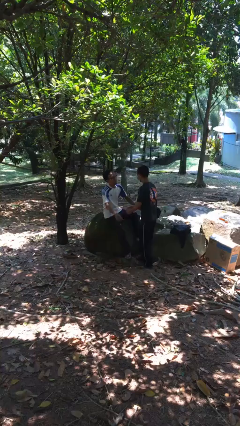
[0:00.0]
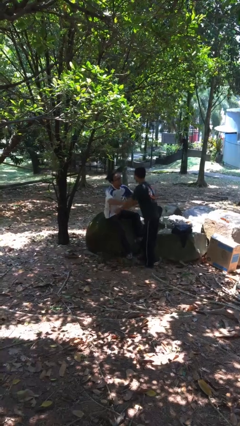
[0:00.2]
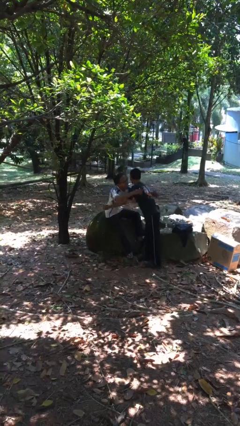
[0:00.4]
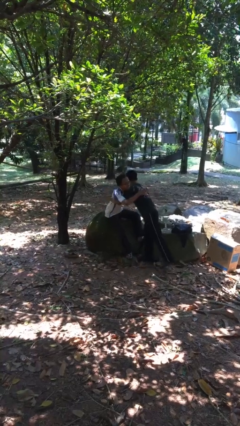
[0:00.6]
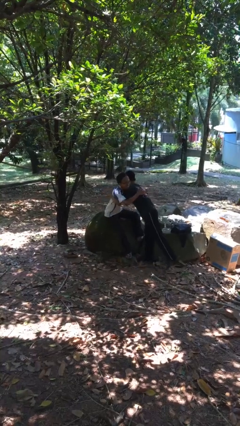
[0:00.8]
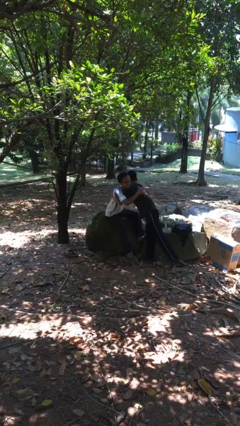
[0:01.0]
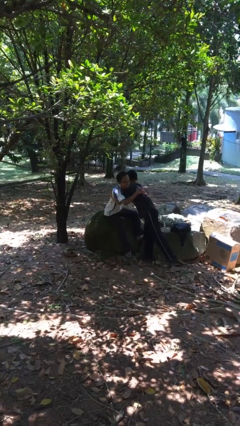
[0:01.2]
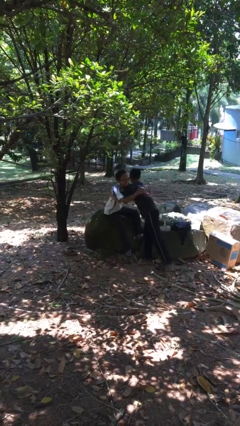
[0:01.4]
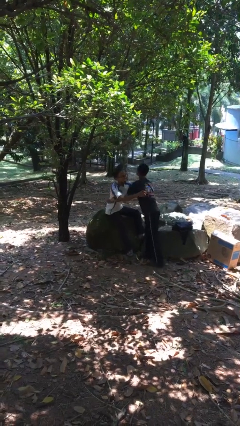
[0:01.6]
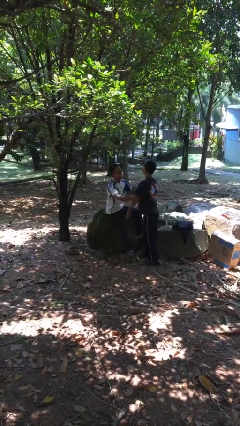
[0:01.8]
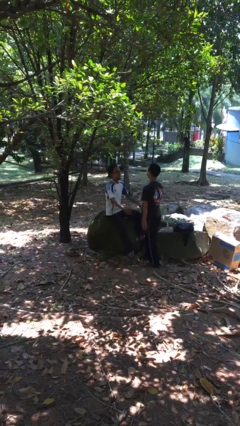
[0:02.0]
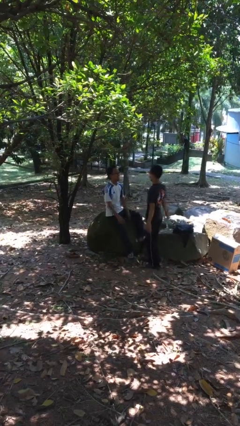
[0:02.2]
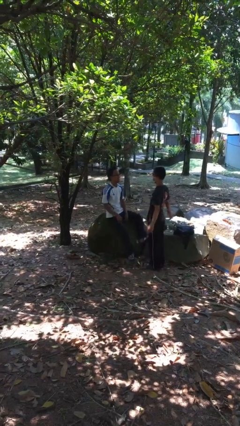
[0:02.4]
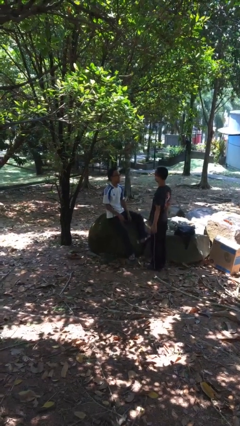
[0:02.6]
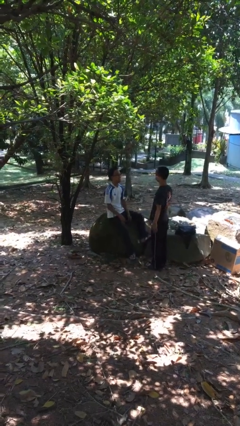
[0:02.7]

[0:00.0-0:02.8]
person embraces person

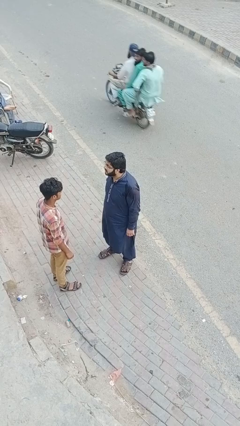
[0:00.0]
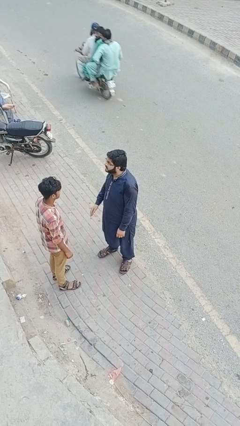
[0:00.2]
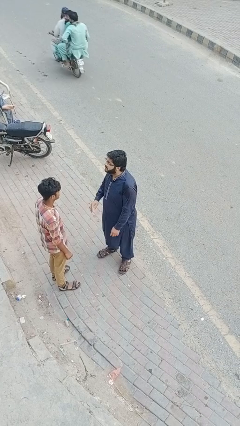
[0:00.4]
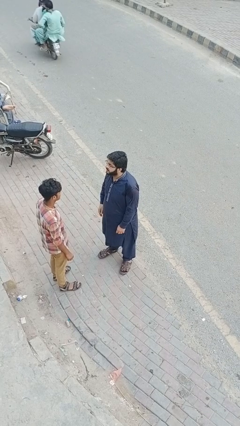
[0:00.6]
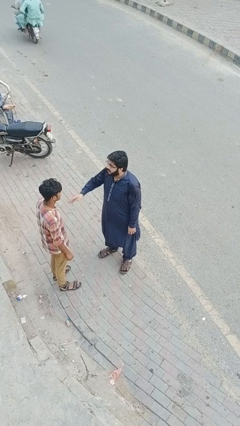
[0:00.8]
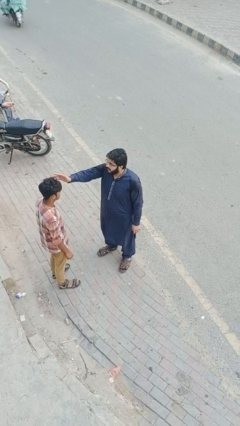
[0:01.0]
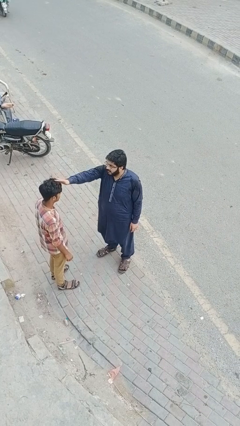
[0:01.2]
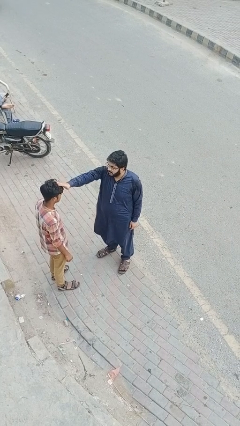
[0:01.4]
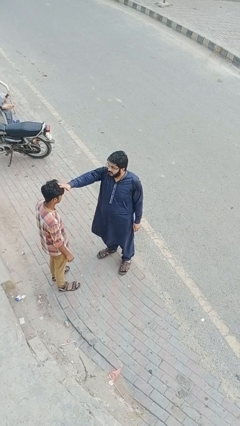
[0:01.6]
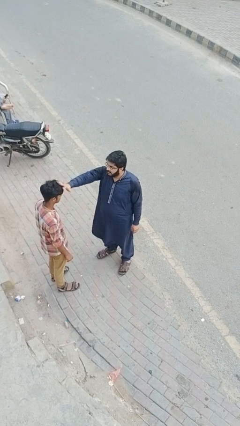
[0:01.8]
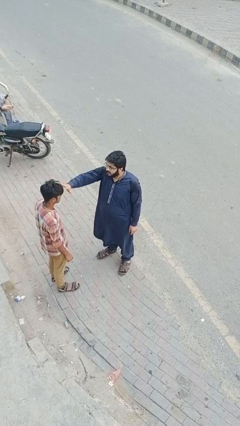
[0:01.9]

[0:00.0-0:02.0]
person grabs person by hair

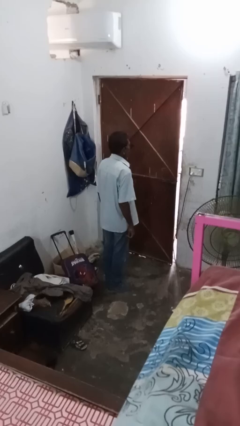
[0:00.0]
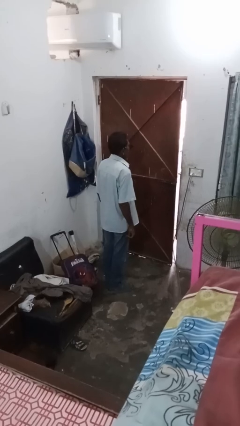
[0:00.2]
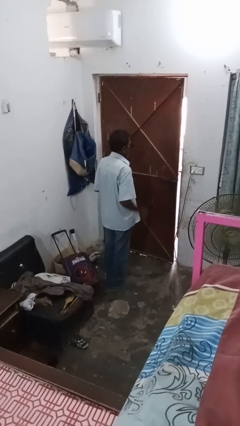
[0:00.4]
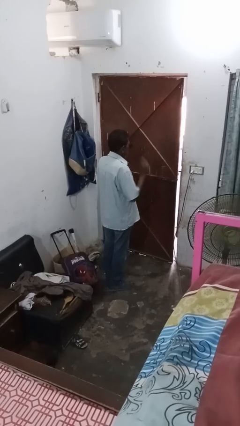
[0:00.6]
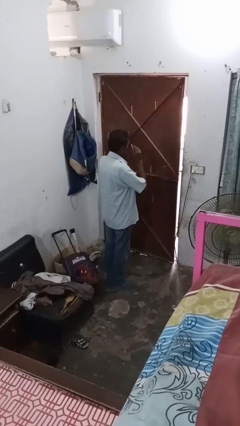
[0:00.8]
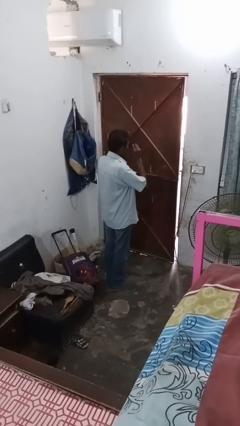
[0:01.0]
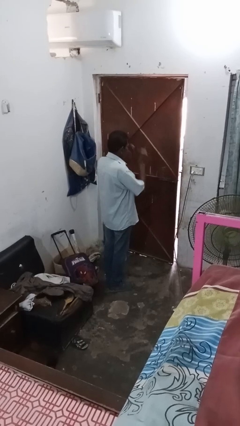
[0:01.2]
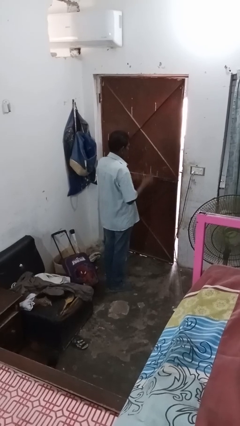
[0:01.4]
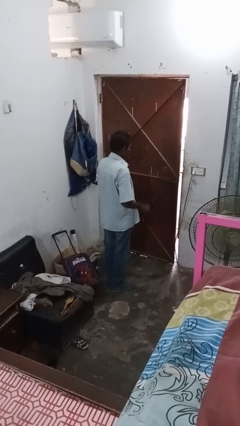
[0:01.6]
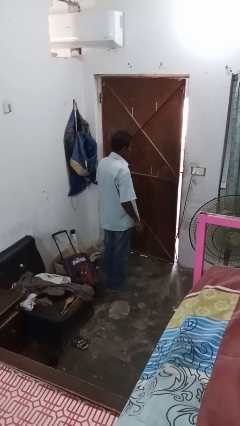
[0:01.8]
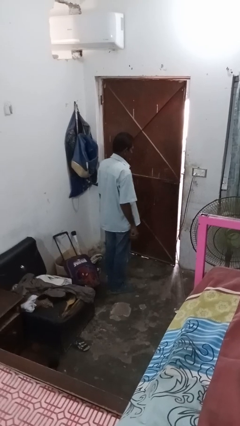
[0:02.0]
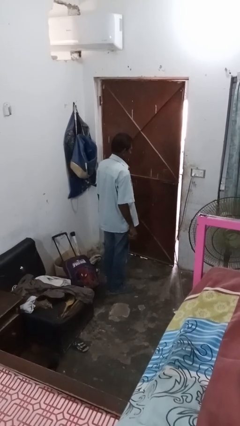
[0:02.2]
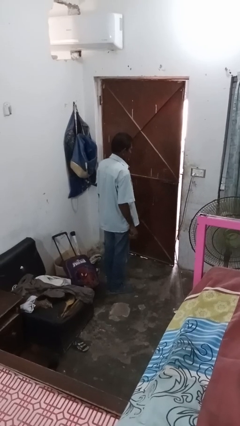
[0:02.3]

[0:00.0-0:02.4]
person takes off sunglasses

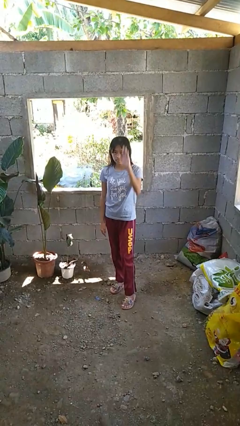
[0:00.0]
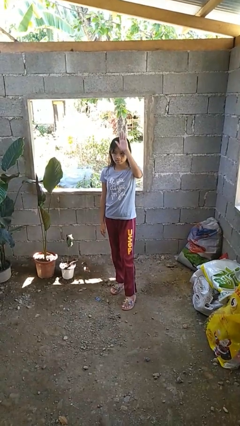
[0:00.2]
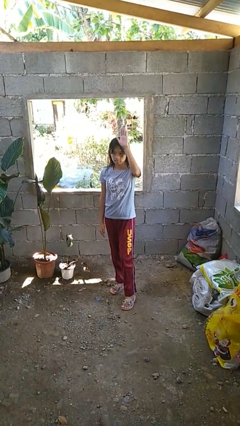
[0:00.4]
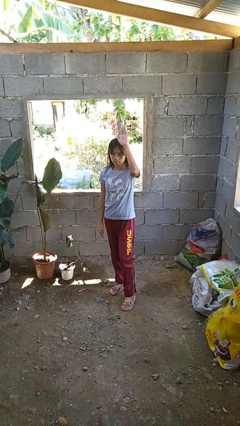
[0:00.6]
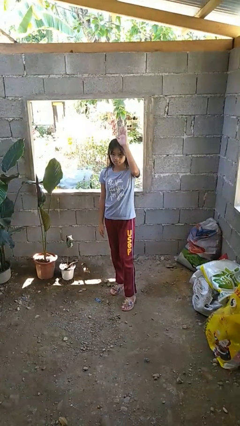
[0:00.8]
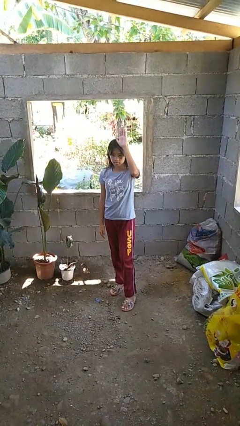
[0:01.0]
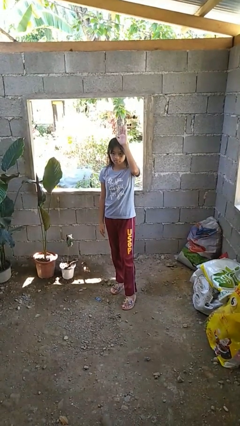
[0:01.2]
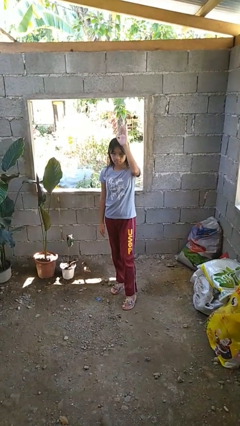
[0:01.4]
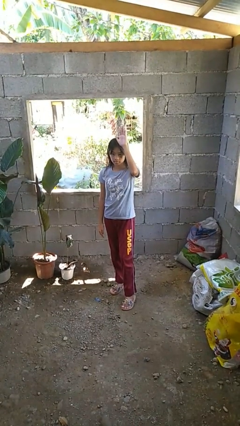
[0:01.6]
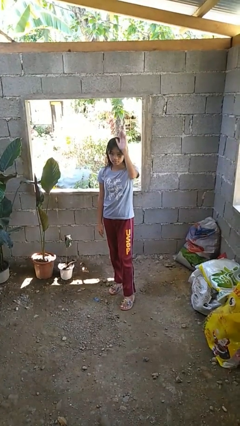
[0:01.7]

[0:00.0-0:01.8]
person gestures raise hand

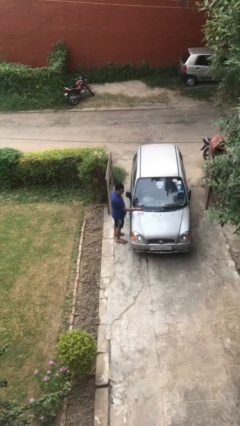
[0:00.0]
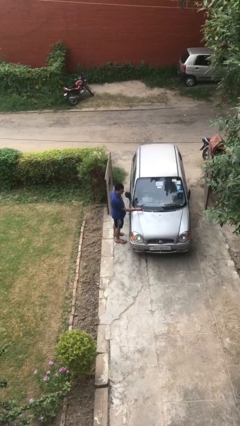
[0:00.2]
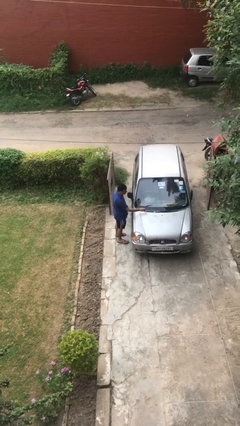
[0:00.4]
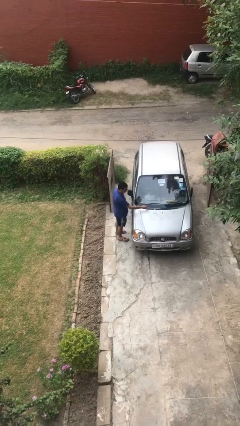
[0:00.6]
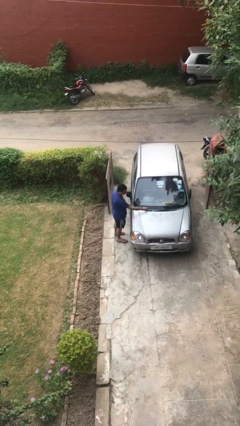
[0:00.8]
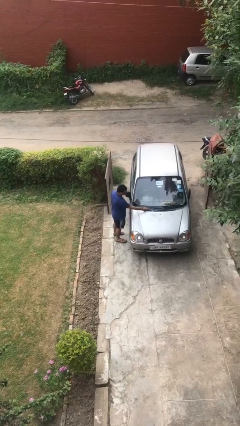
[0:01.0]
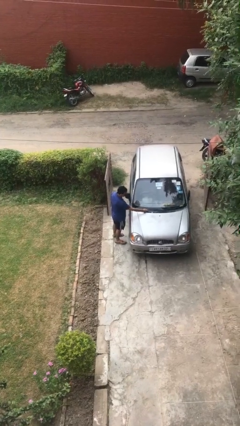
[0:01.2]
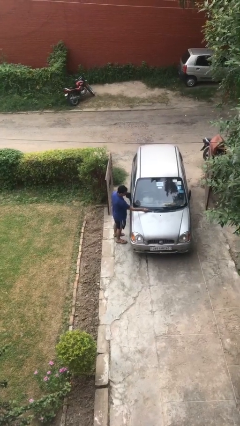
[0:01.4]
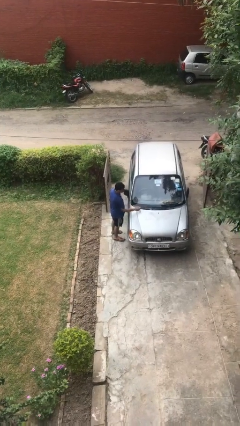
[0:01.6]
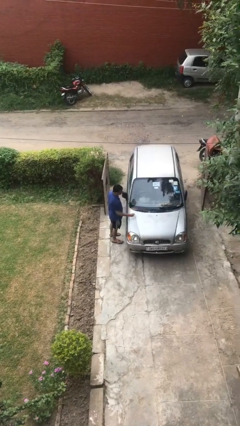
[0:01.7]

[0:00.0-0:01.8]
person flips down car wipers

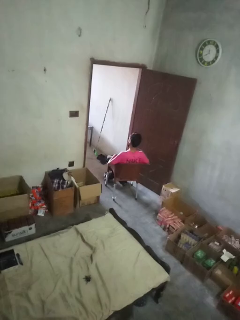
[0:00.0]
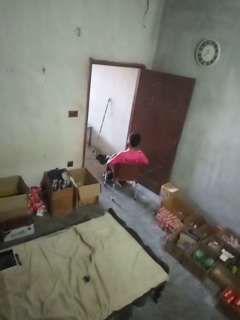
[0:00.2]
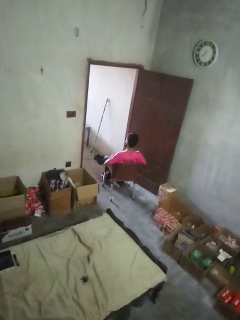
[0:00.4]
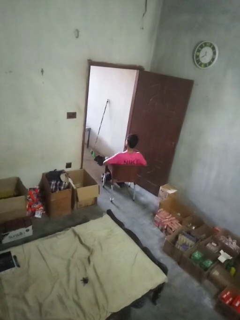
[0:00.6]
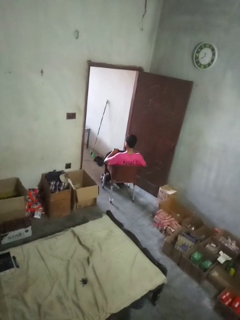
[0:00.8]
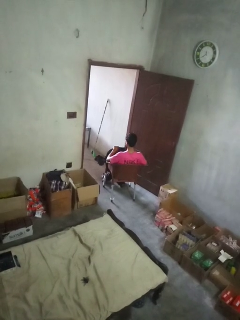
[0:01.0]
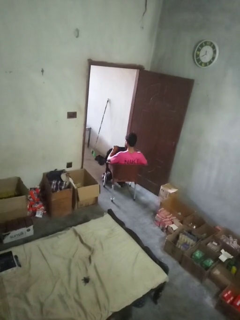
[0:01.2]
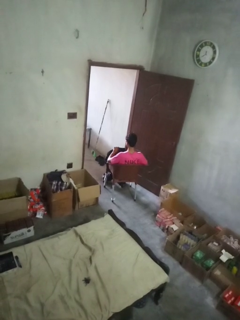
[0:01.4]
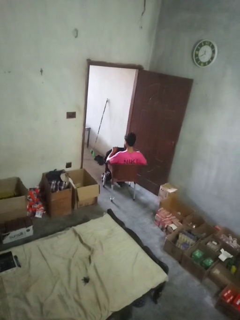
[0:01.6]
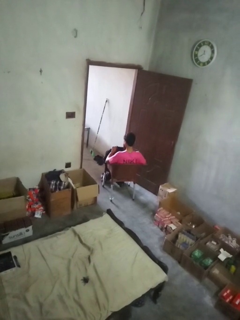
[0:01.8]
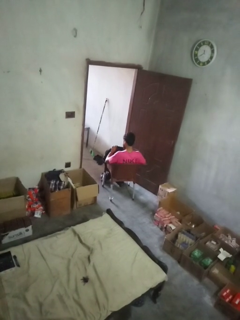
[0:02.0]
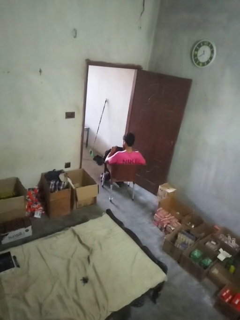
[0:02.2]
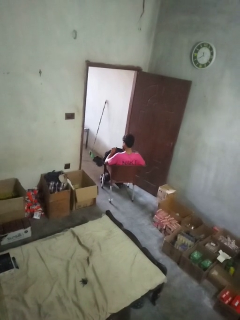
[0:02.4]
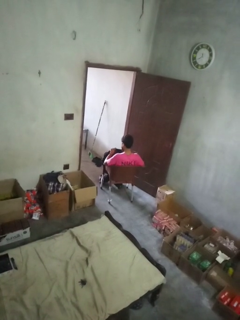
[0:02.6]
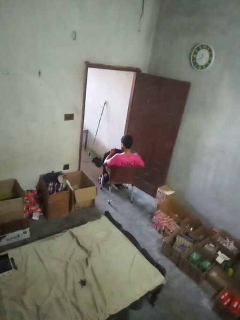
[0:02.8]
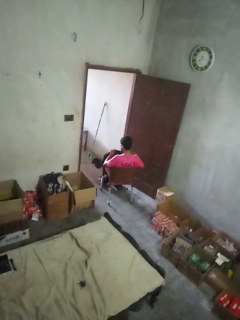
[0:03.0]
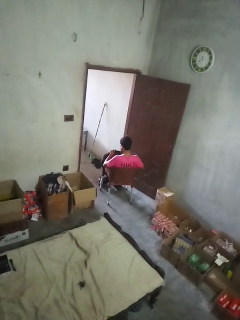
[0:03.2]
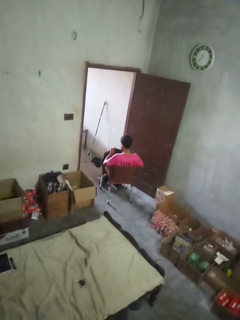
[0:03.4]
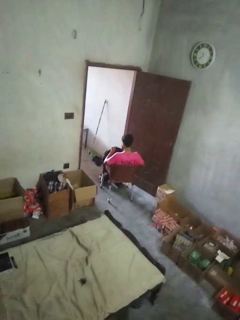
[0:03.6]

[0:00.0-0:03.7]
person searches in backpack

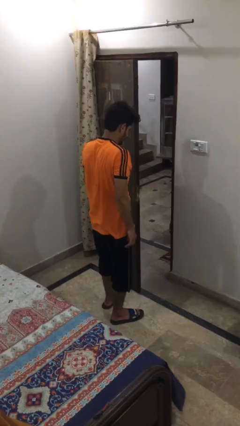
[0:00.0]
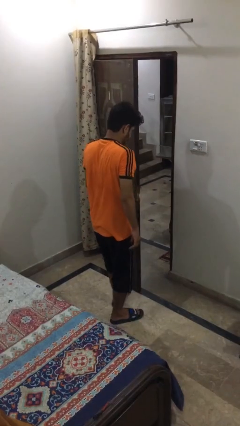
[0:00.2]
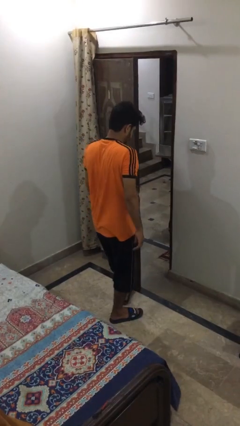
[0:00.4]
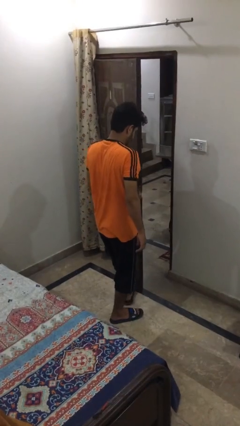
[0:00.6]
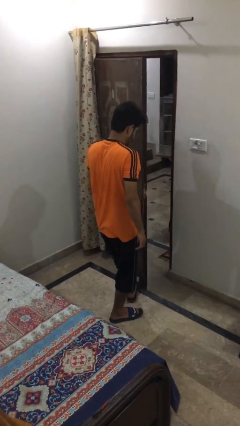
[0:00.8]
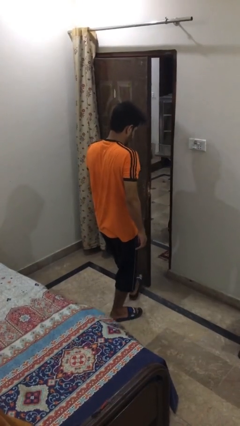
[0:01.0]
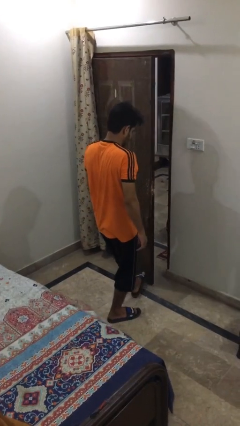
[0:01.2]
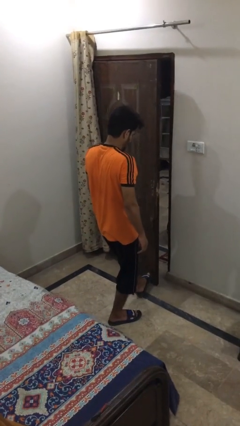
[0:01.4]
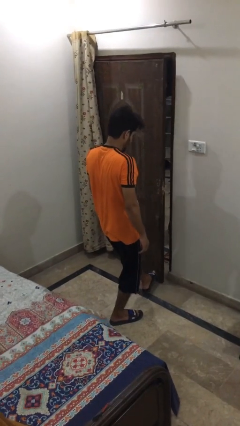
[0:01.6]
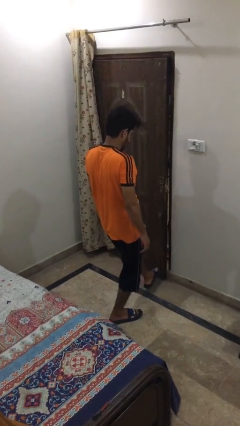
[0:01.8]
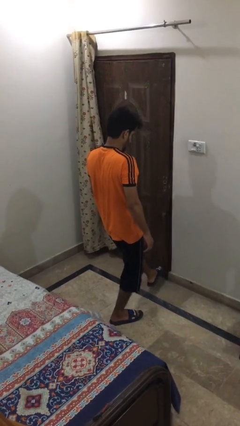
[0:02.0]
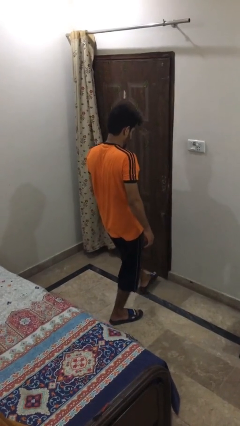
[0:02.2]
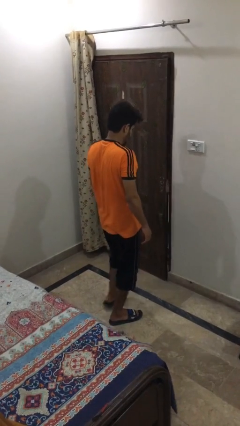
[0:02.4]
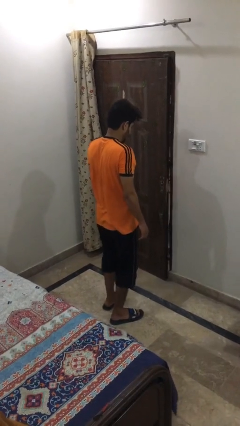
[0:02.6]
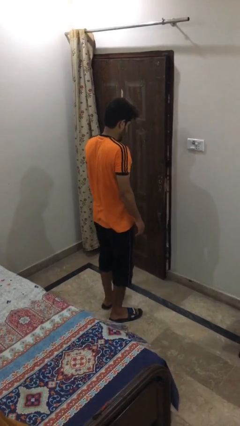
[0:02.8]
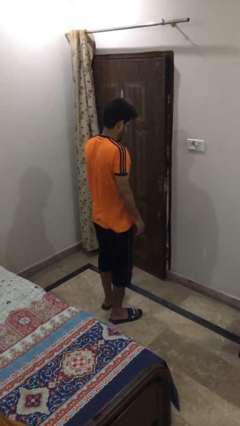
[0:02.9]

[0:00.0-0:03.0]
person closes door with foot

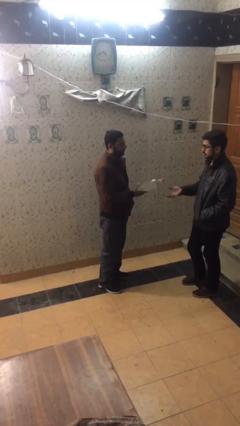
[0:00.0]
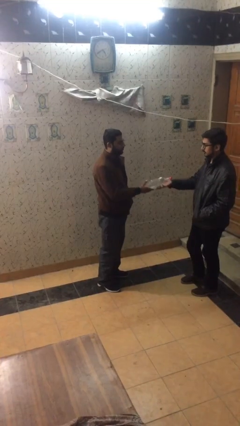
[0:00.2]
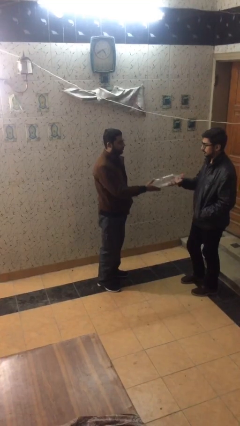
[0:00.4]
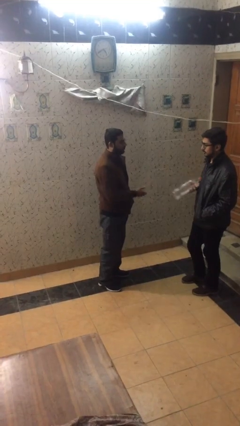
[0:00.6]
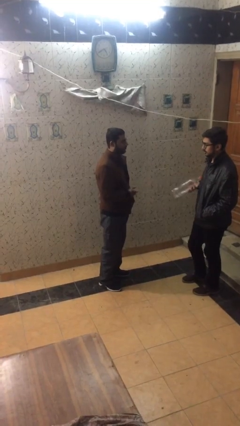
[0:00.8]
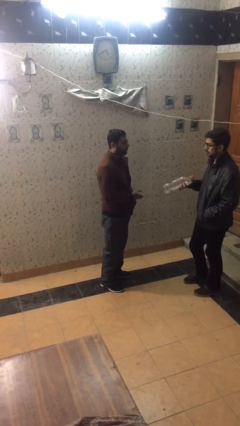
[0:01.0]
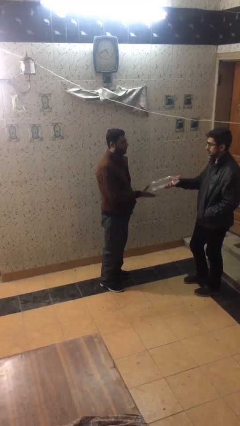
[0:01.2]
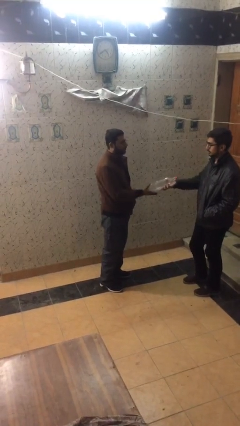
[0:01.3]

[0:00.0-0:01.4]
person transfers object to person
